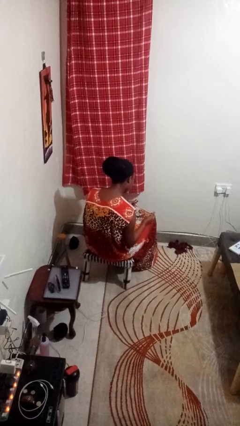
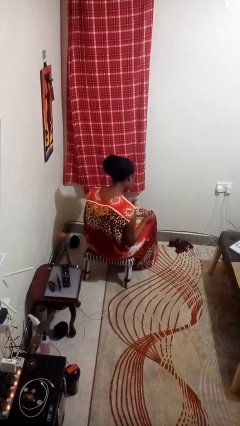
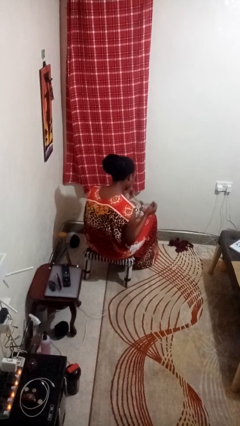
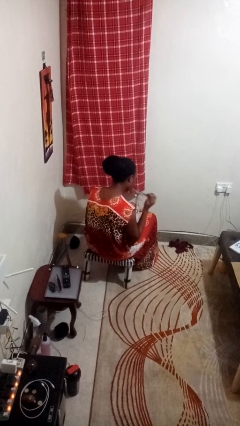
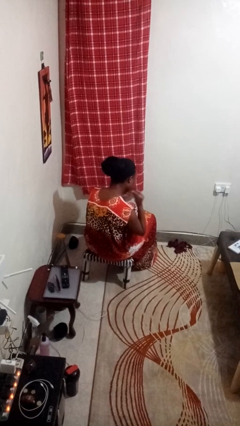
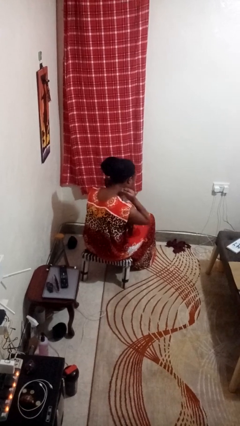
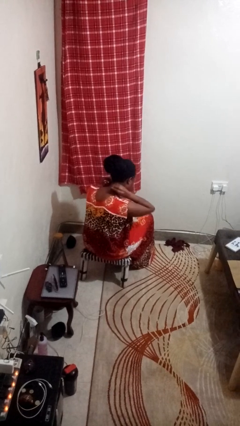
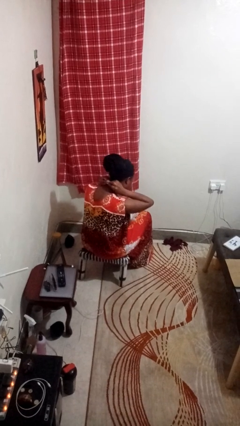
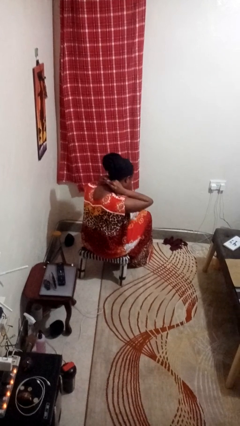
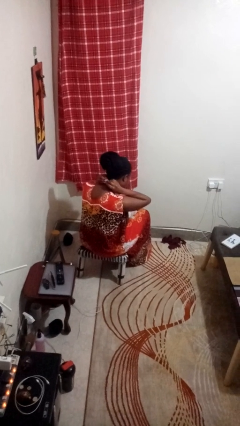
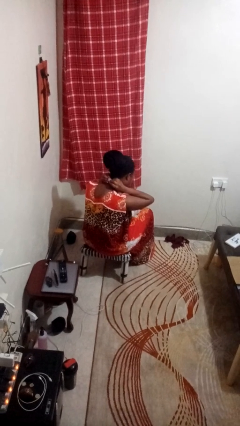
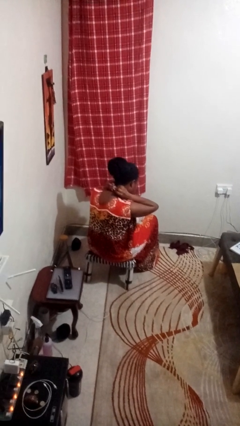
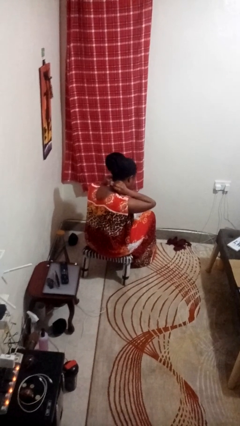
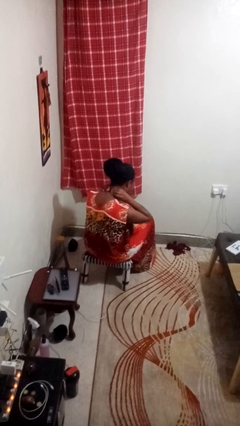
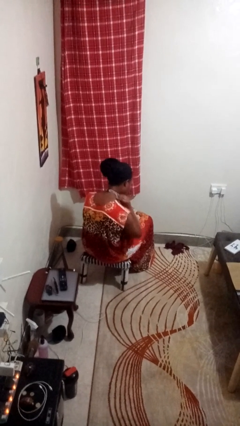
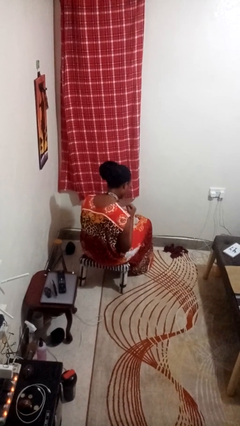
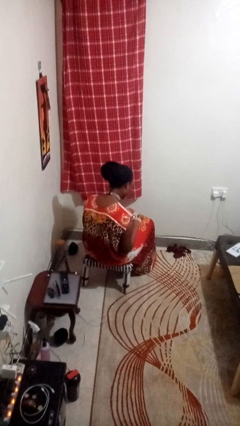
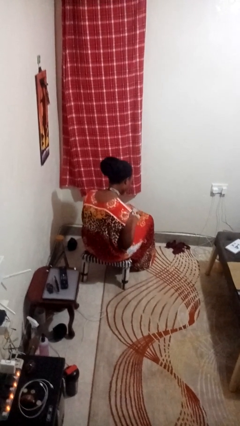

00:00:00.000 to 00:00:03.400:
person puts on necklace

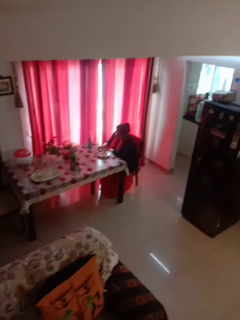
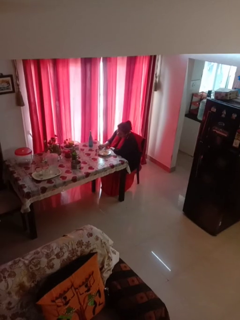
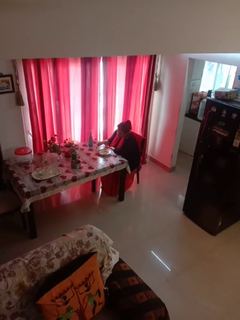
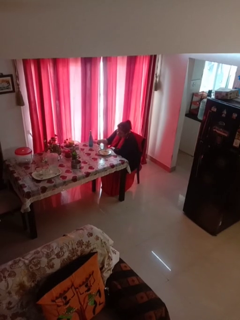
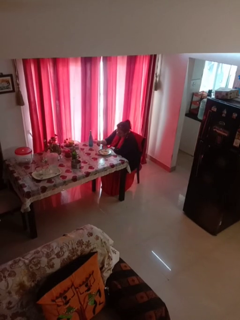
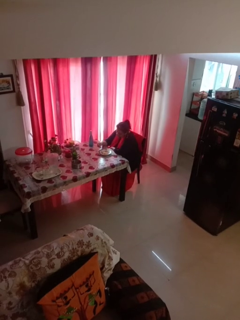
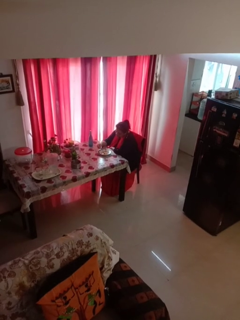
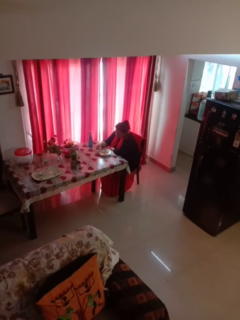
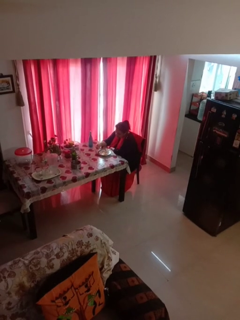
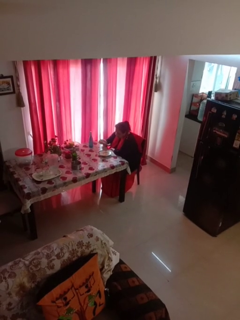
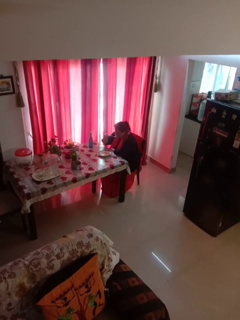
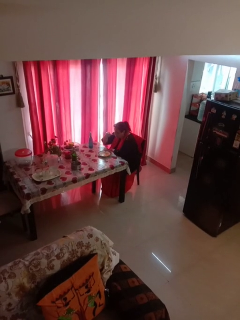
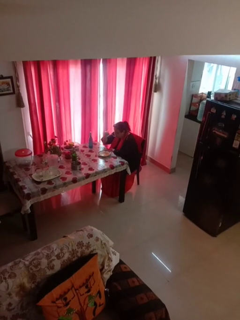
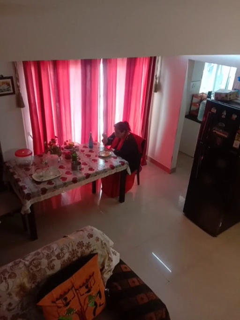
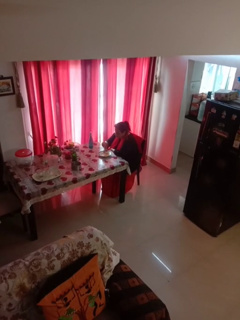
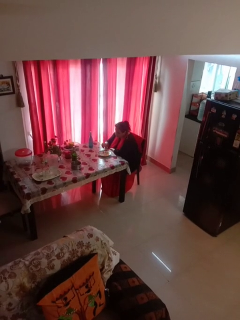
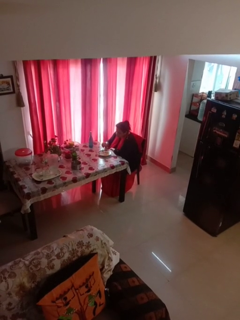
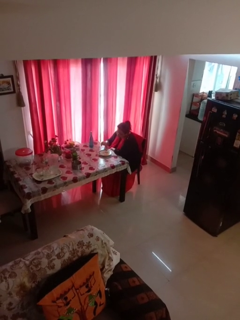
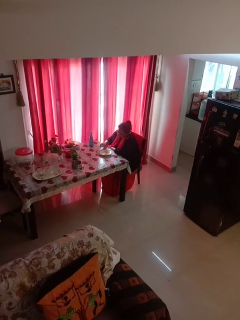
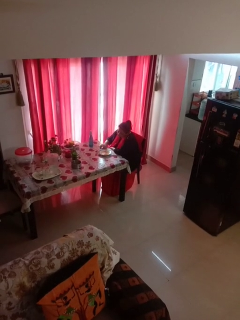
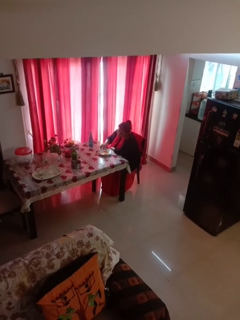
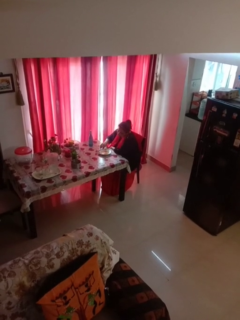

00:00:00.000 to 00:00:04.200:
person eats with utensil

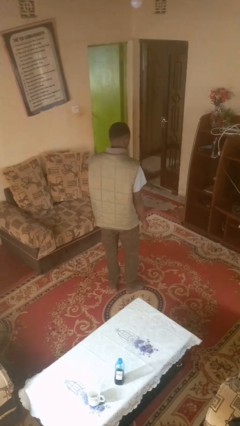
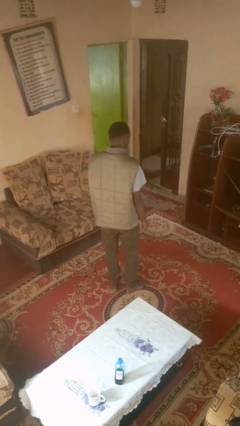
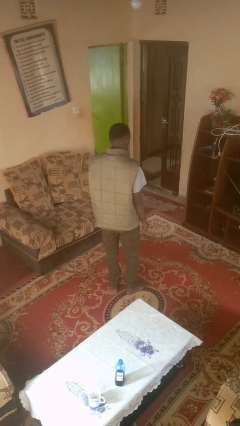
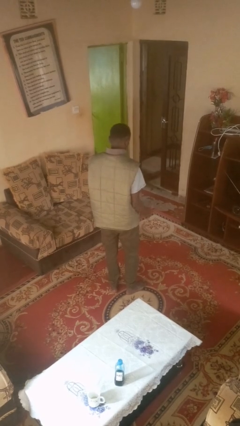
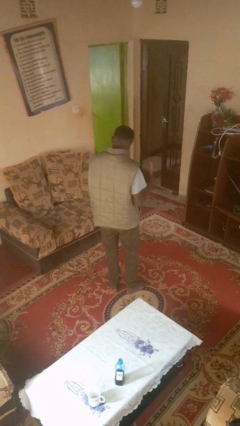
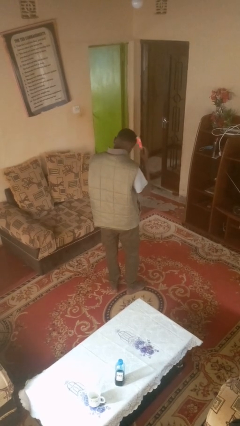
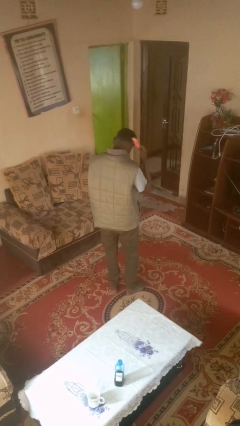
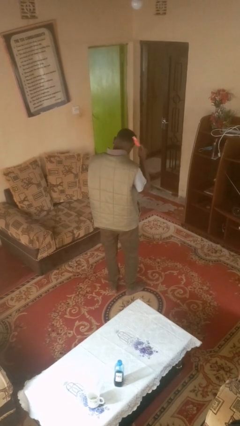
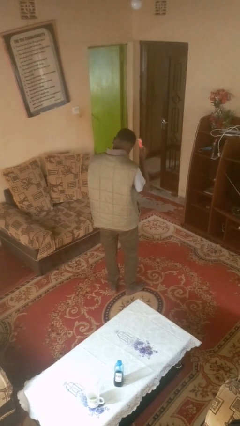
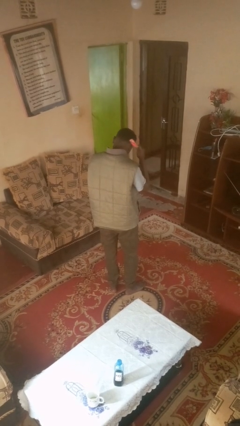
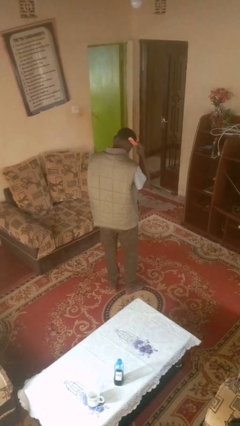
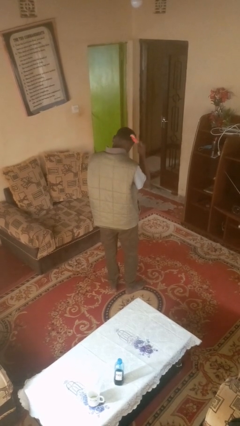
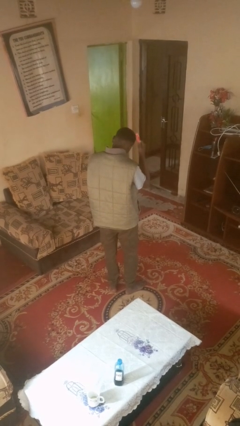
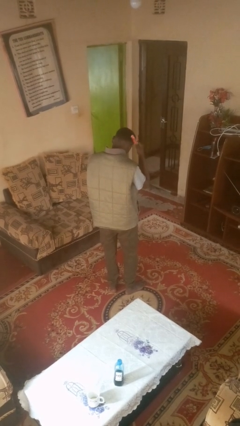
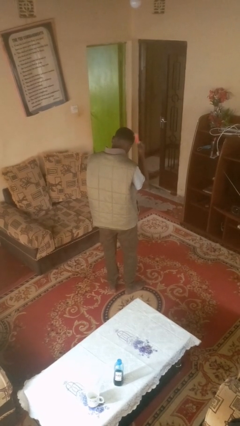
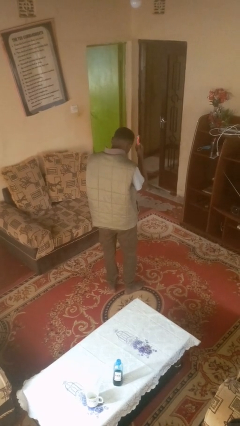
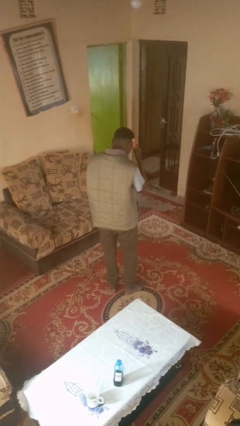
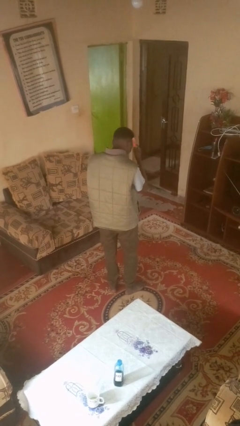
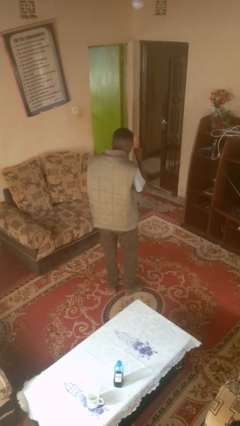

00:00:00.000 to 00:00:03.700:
person brushes hair

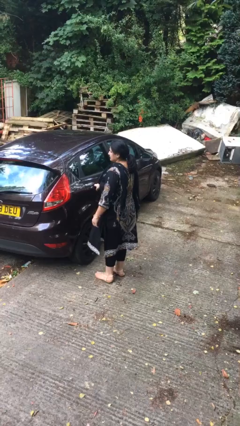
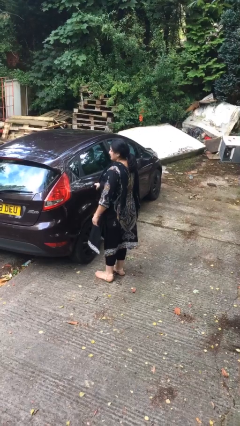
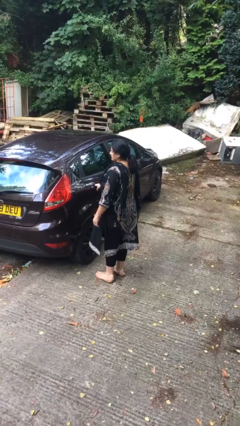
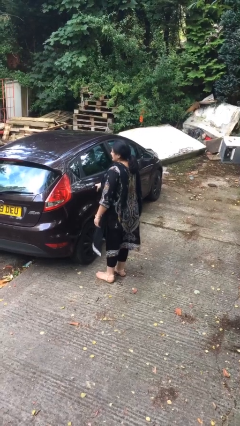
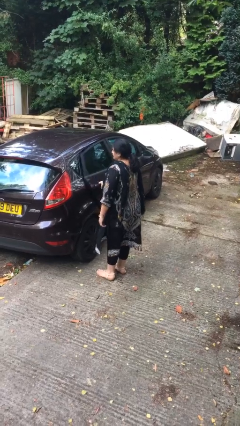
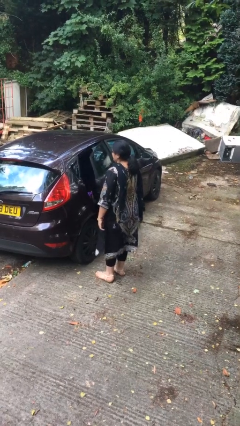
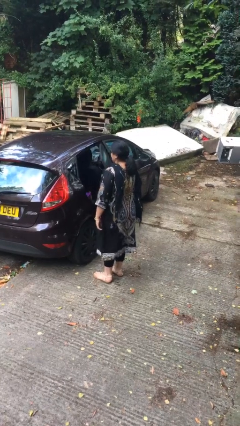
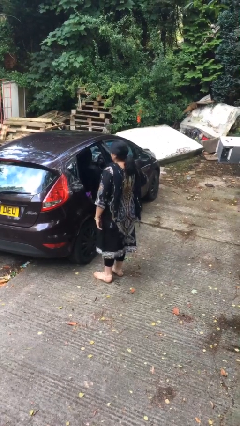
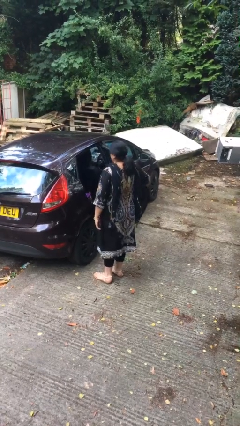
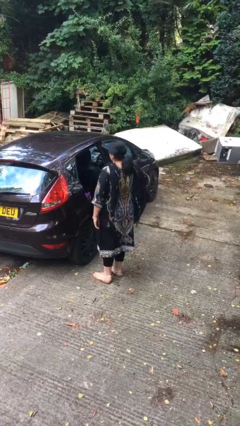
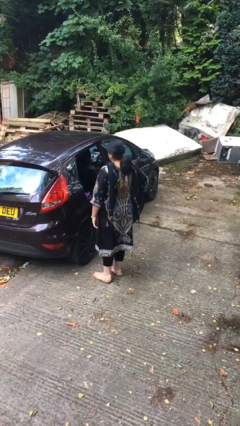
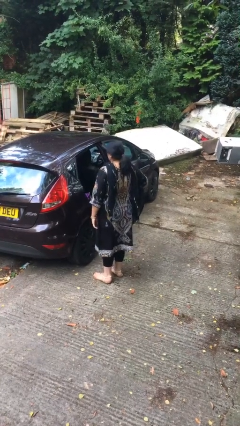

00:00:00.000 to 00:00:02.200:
person opens car door

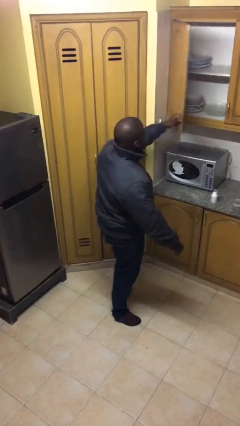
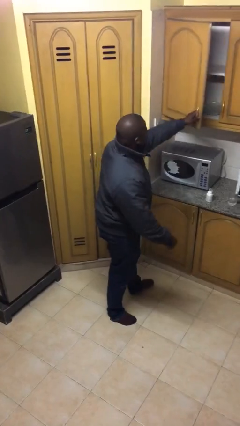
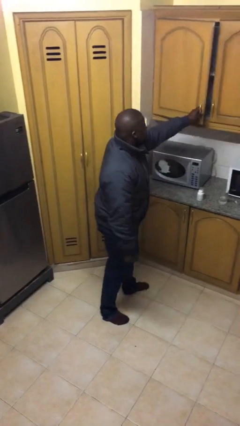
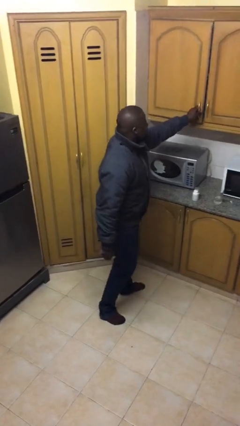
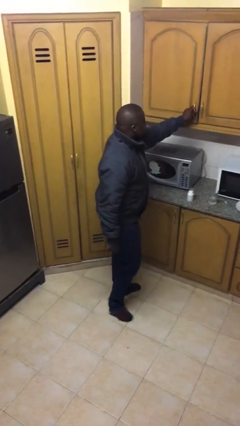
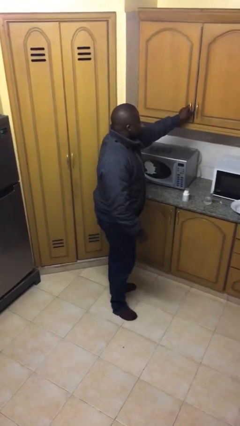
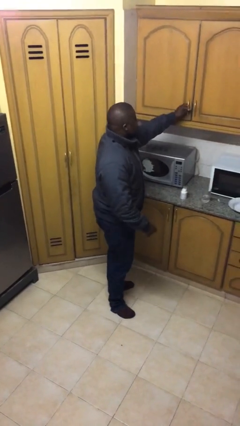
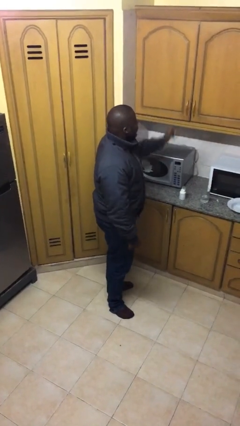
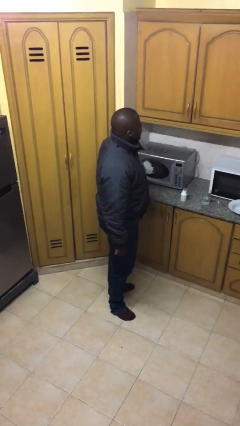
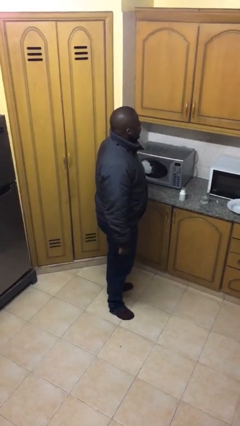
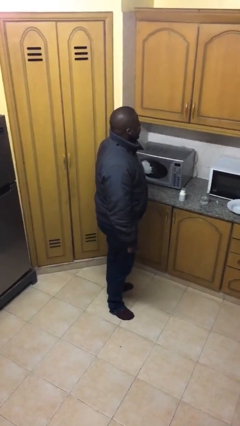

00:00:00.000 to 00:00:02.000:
person closes cabinet

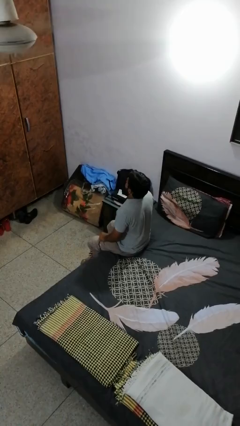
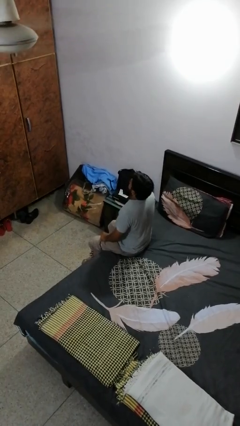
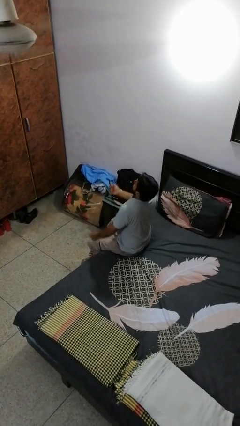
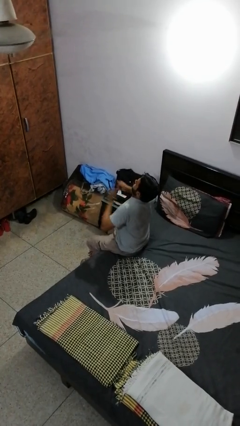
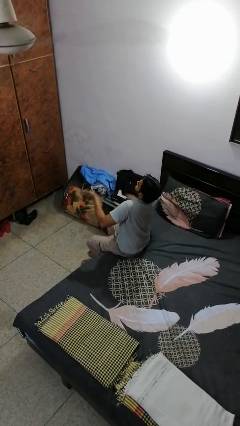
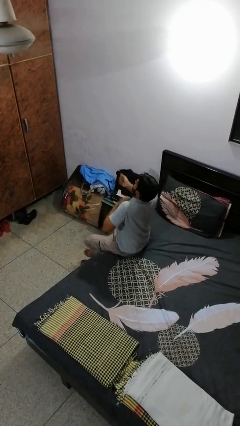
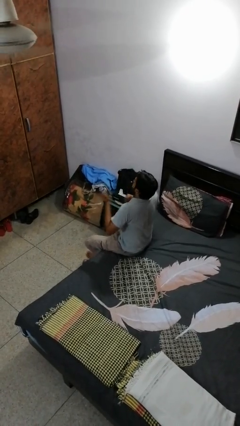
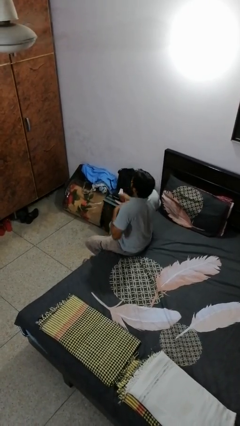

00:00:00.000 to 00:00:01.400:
person drums on chest

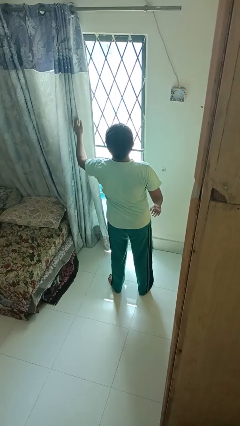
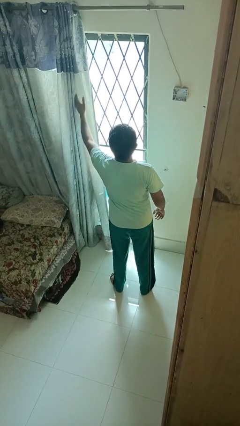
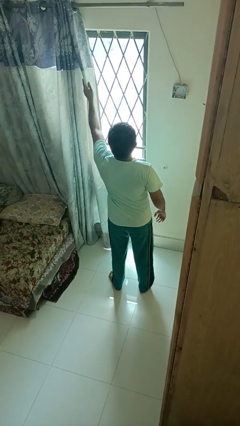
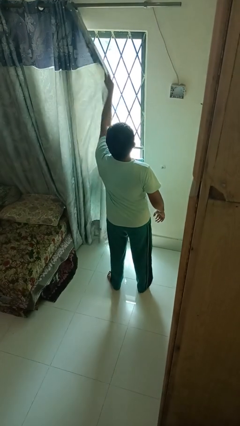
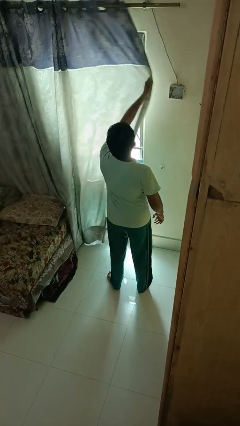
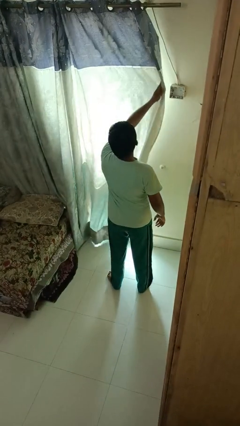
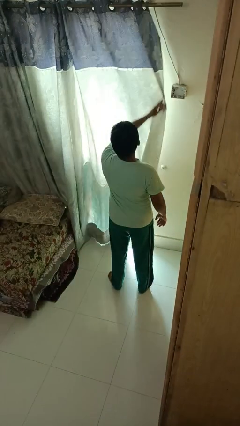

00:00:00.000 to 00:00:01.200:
person closes curtains

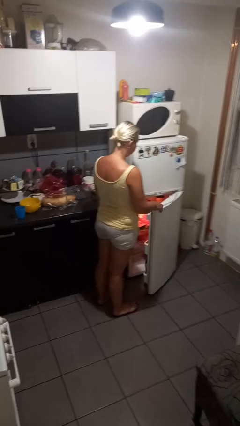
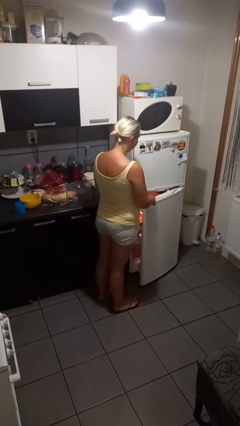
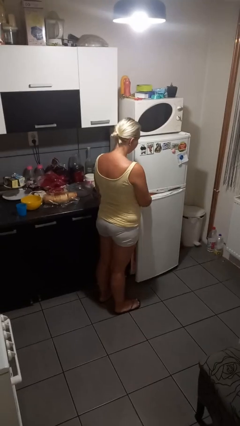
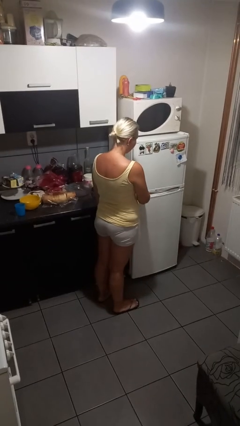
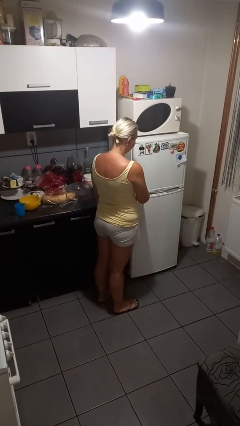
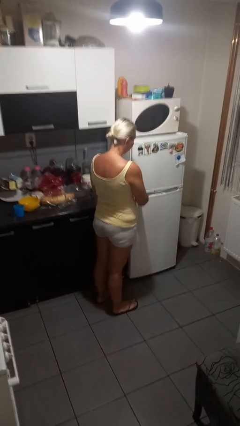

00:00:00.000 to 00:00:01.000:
person closes refrigerator
